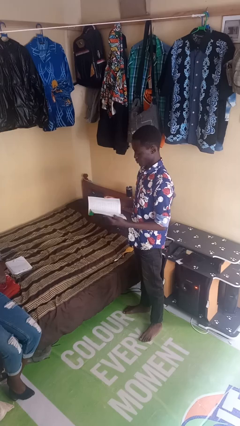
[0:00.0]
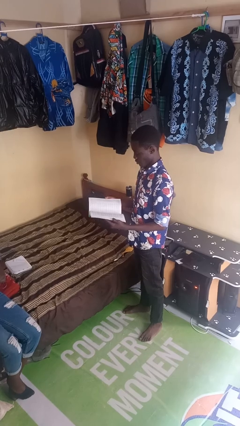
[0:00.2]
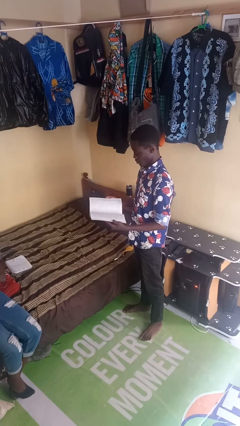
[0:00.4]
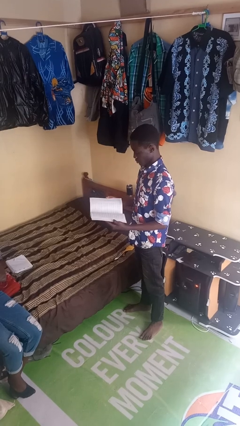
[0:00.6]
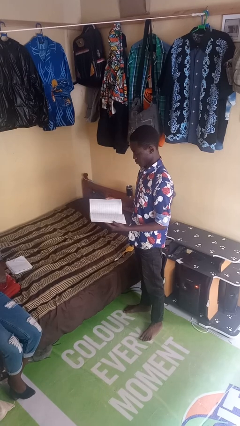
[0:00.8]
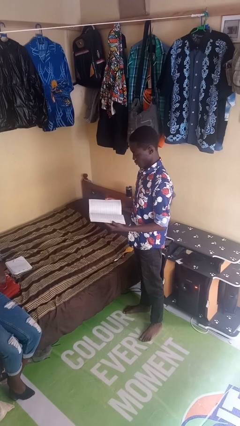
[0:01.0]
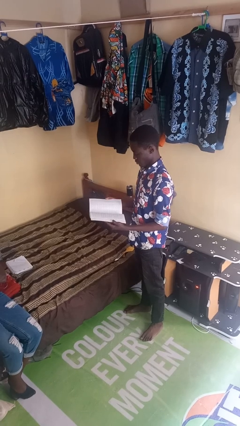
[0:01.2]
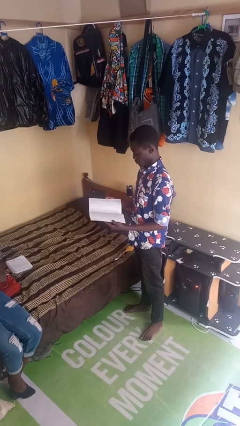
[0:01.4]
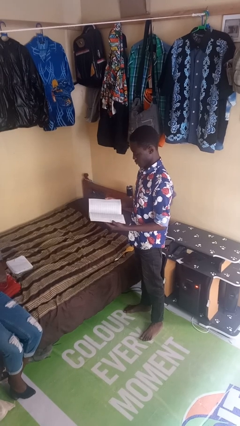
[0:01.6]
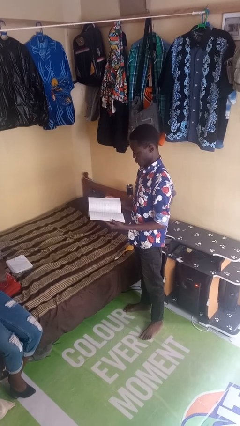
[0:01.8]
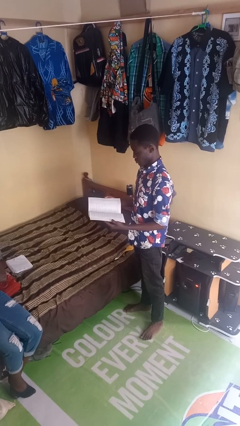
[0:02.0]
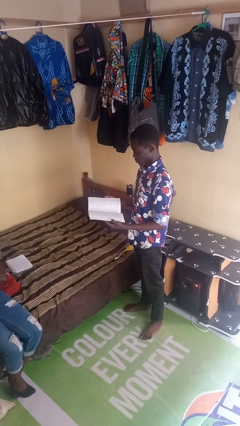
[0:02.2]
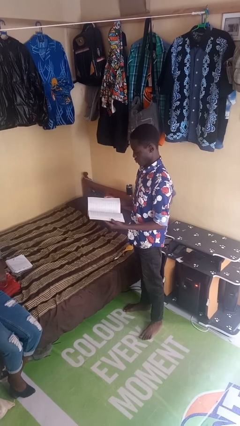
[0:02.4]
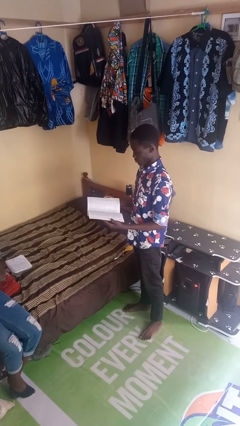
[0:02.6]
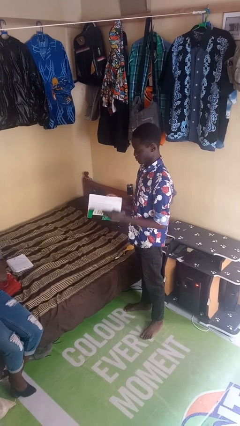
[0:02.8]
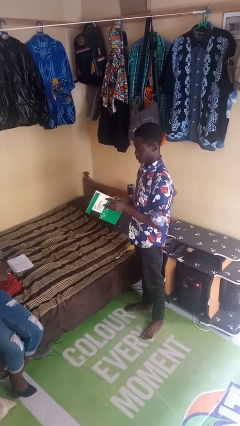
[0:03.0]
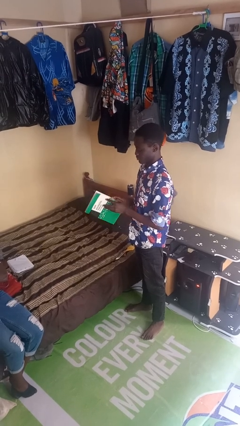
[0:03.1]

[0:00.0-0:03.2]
person reads magazine

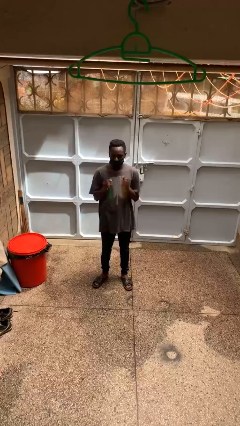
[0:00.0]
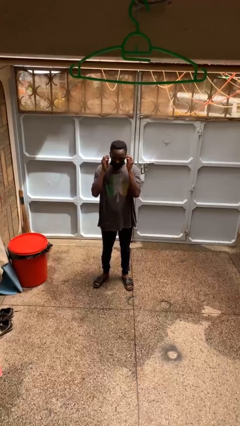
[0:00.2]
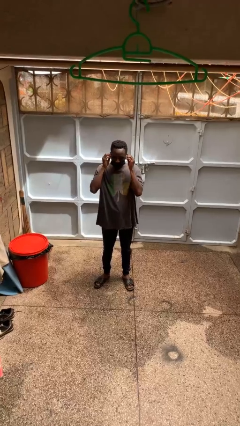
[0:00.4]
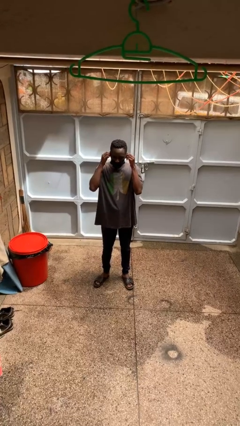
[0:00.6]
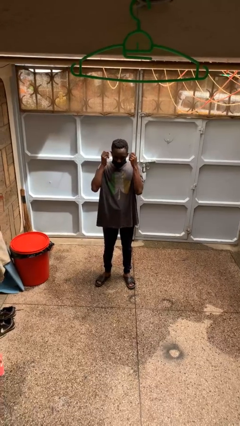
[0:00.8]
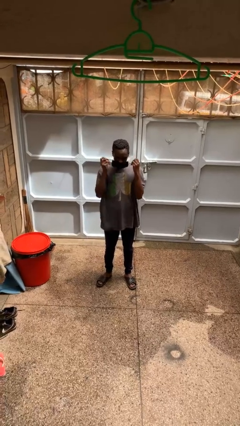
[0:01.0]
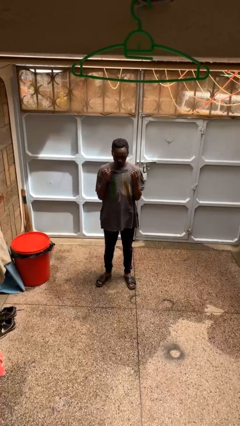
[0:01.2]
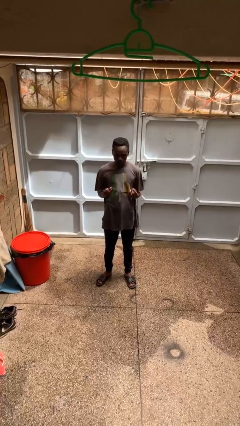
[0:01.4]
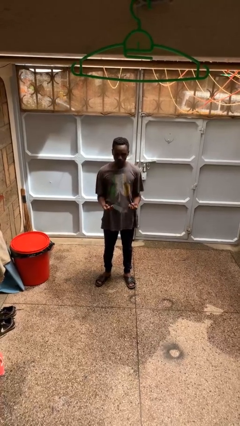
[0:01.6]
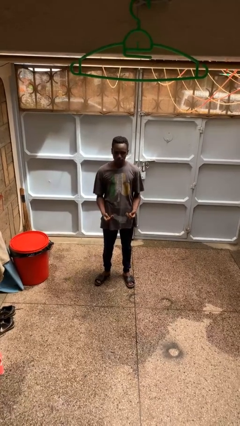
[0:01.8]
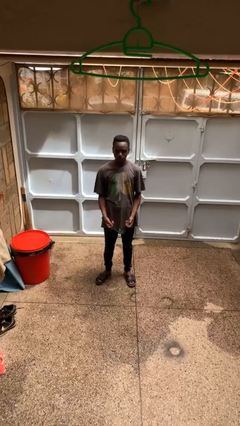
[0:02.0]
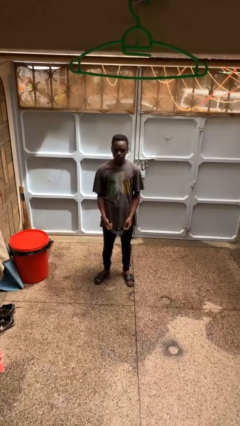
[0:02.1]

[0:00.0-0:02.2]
person takes off facemask

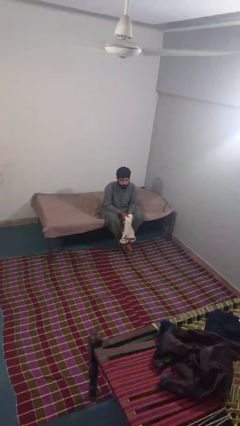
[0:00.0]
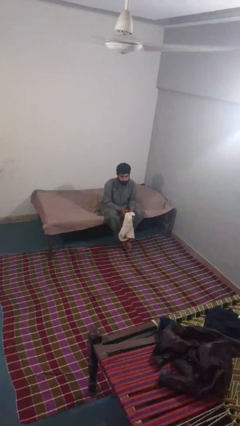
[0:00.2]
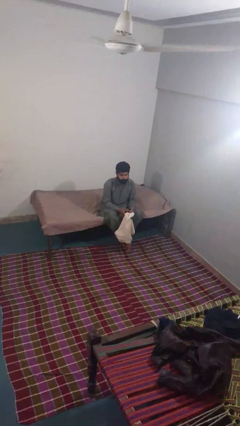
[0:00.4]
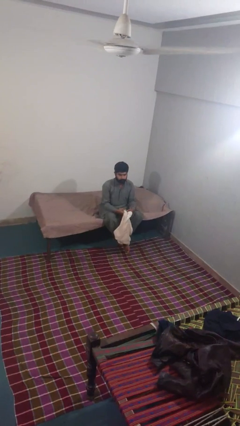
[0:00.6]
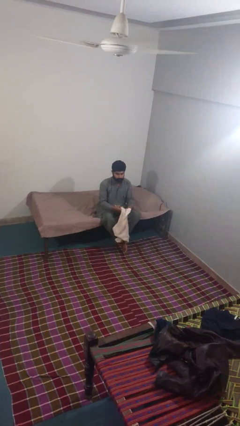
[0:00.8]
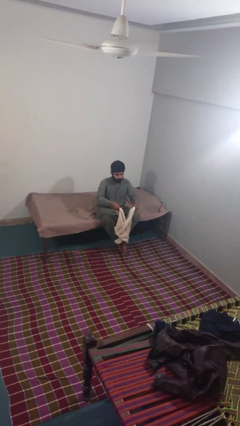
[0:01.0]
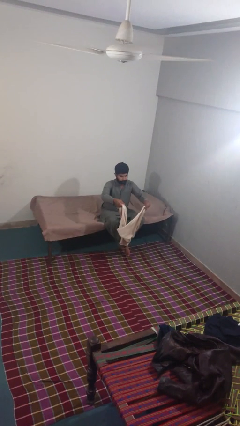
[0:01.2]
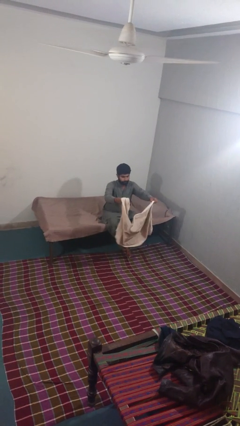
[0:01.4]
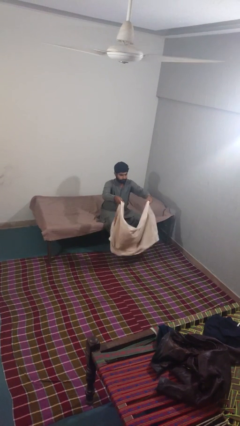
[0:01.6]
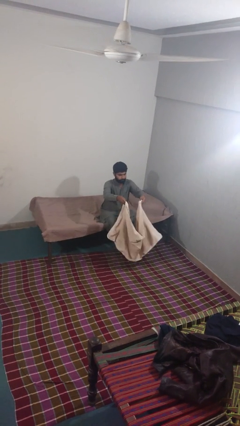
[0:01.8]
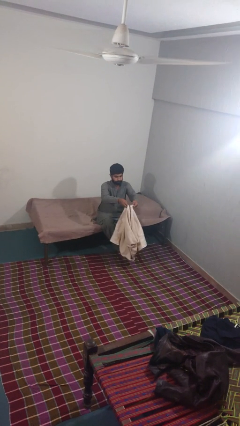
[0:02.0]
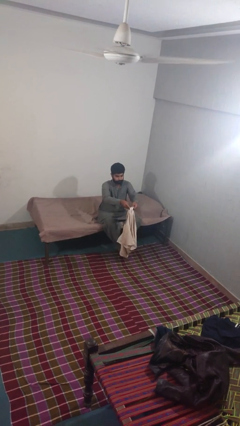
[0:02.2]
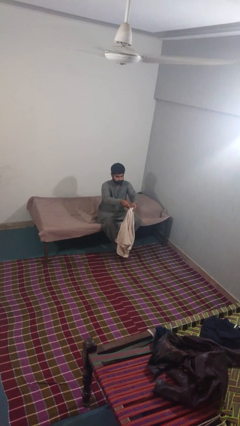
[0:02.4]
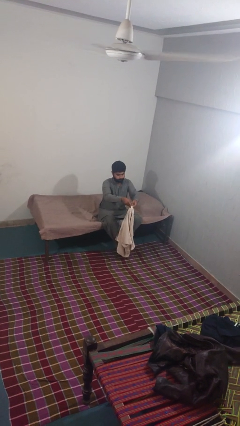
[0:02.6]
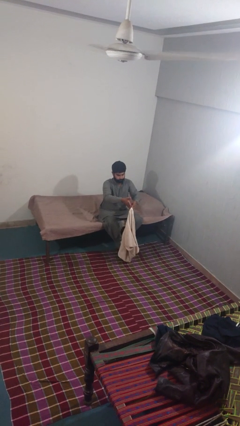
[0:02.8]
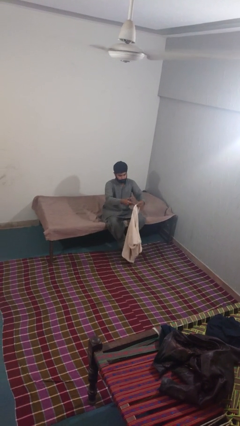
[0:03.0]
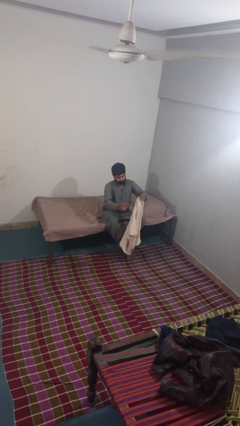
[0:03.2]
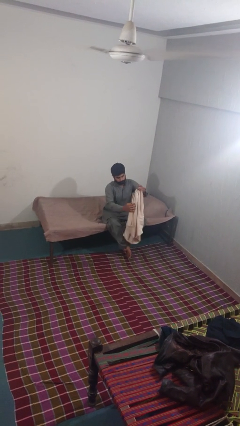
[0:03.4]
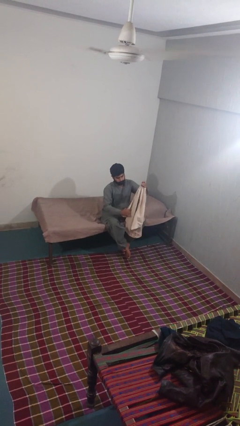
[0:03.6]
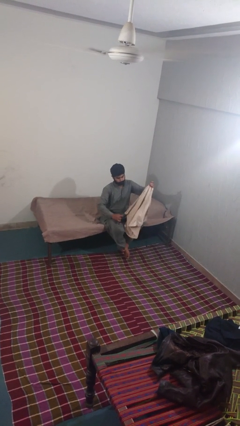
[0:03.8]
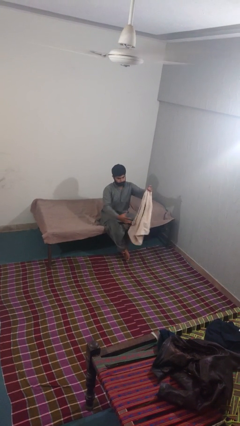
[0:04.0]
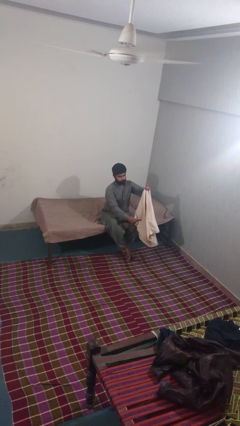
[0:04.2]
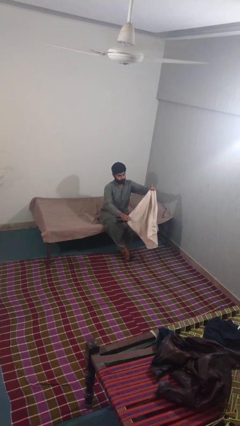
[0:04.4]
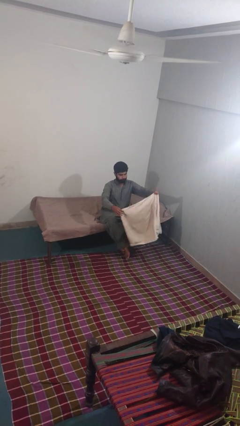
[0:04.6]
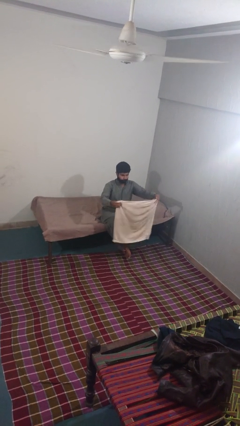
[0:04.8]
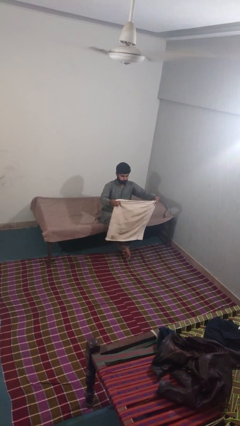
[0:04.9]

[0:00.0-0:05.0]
person folds towel

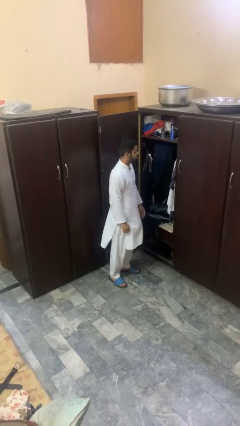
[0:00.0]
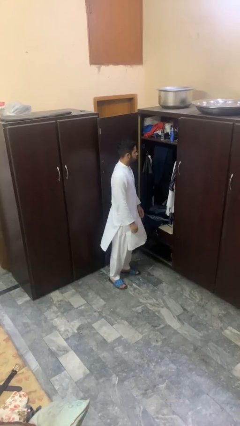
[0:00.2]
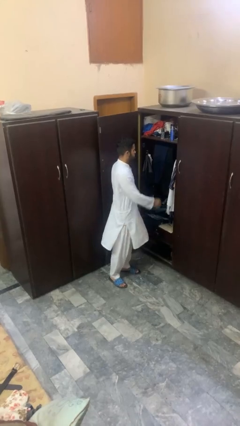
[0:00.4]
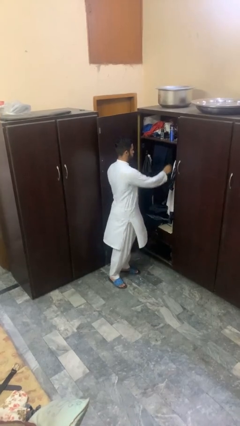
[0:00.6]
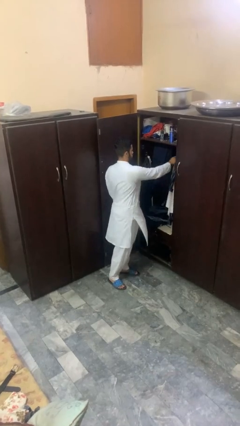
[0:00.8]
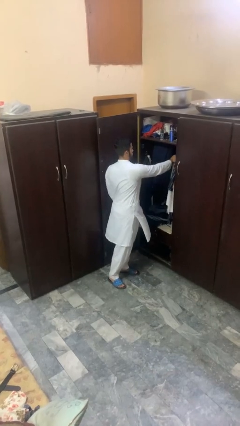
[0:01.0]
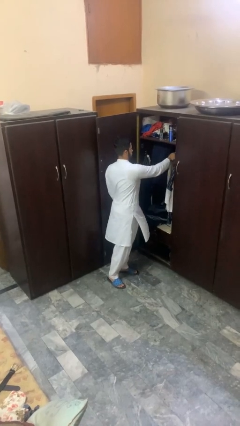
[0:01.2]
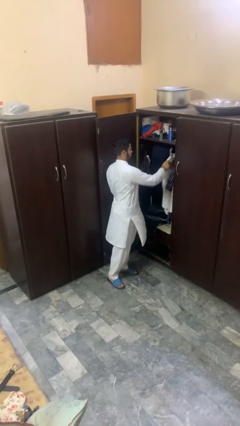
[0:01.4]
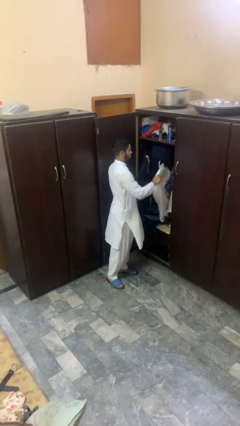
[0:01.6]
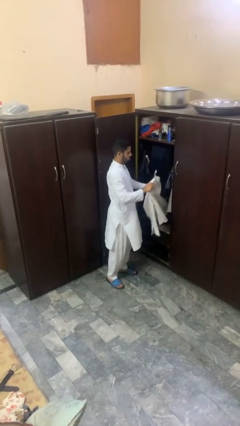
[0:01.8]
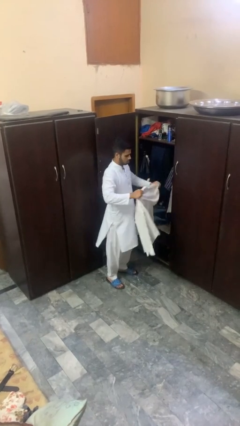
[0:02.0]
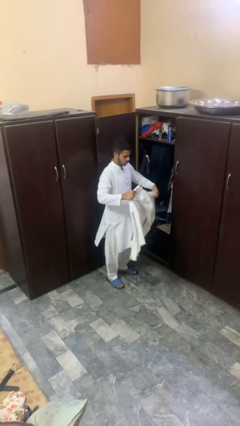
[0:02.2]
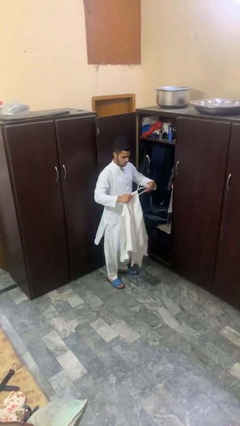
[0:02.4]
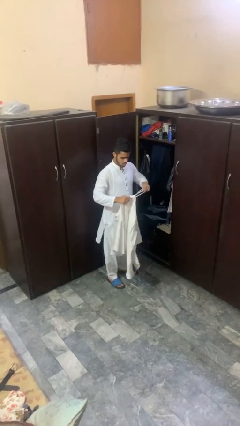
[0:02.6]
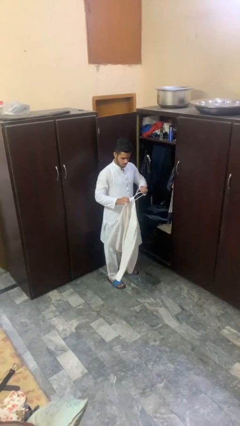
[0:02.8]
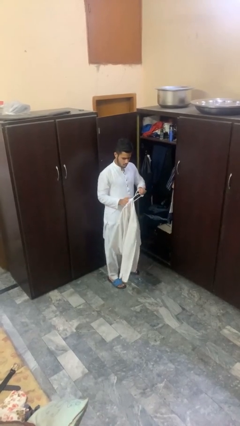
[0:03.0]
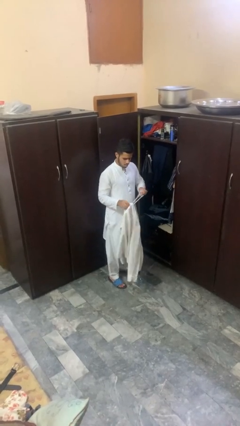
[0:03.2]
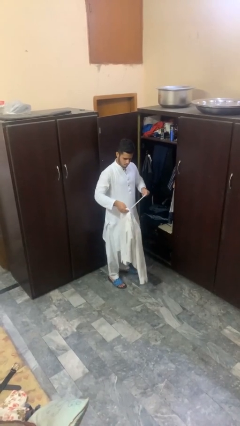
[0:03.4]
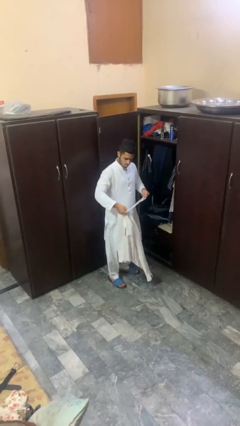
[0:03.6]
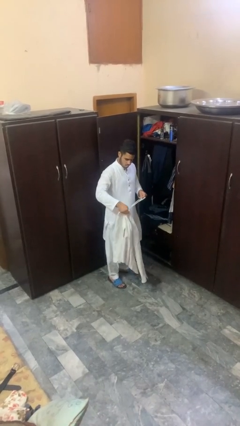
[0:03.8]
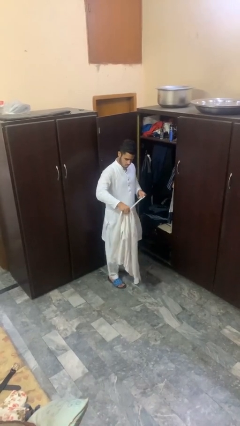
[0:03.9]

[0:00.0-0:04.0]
person takes clothes from closet

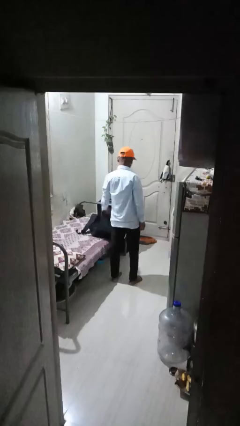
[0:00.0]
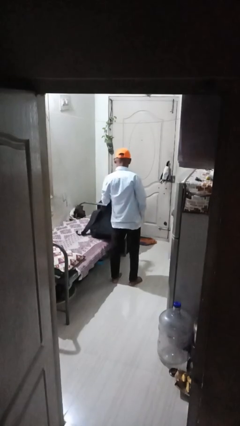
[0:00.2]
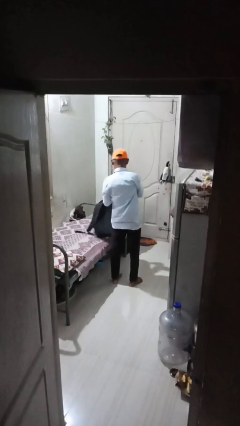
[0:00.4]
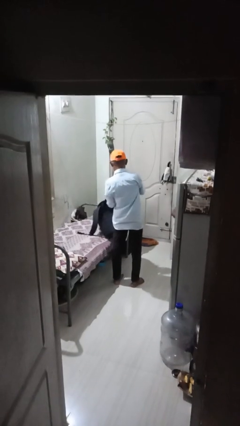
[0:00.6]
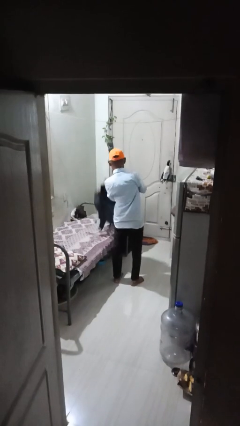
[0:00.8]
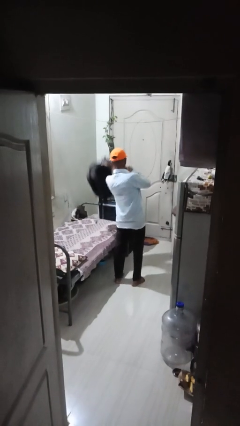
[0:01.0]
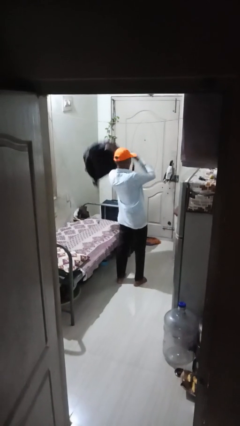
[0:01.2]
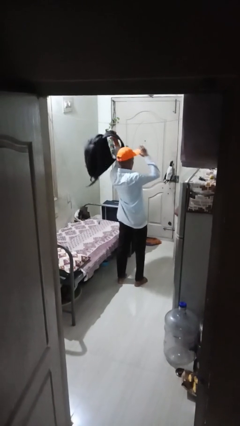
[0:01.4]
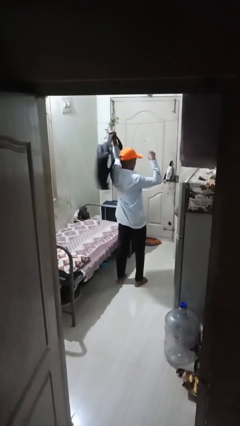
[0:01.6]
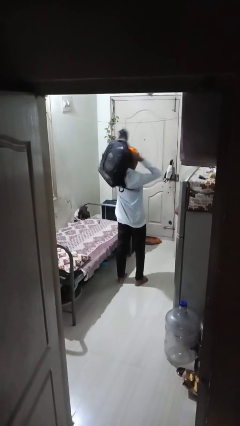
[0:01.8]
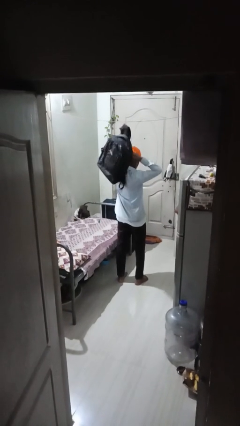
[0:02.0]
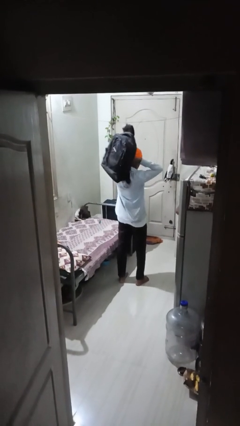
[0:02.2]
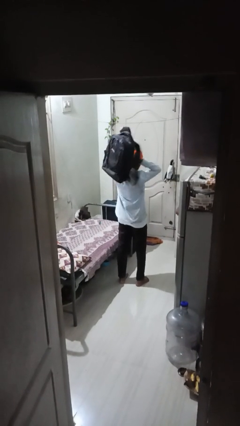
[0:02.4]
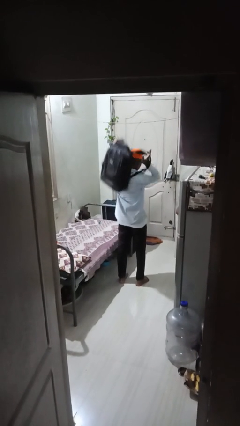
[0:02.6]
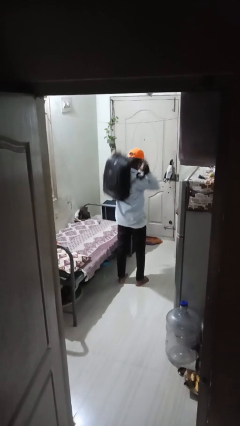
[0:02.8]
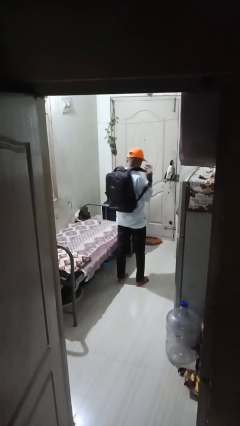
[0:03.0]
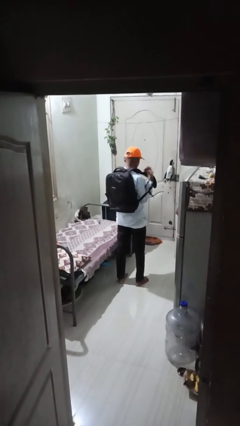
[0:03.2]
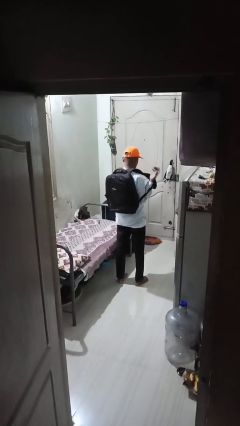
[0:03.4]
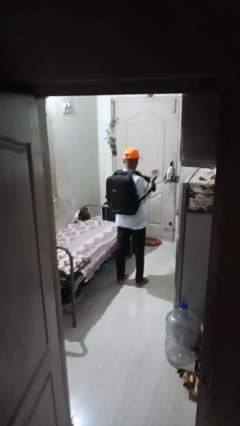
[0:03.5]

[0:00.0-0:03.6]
person puts on backpack
